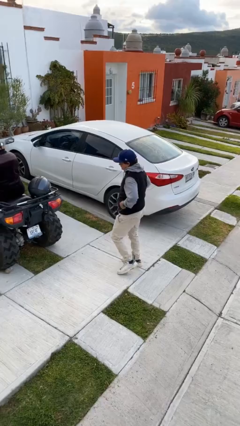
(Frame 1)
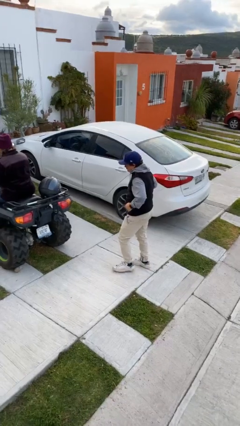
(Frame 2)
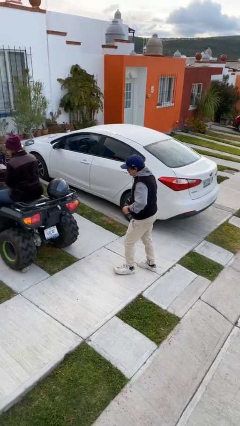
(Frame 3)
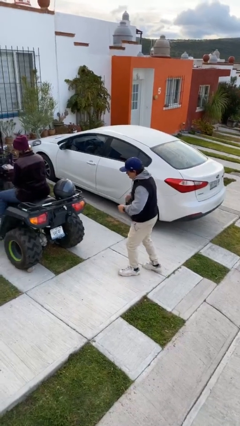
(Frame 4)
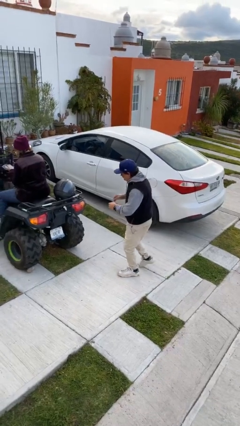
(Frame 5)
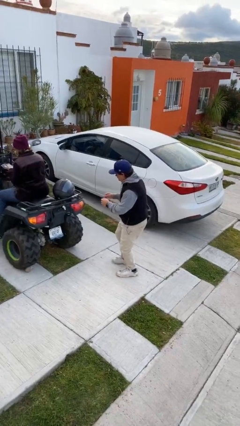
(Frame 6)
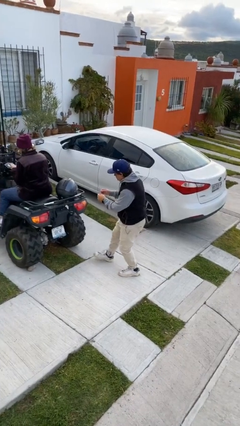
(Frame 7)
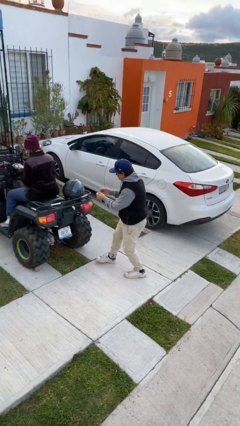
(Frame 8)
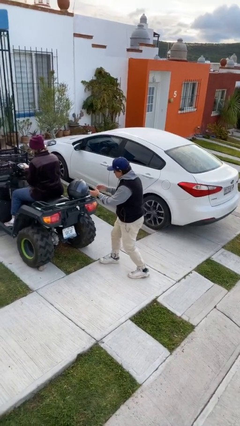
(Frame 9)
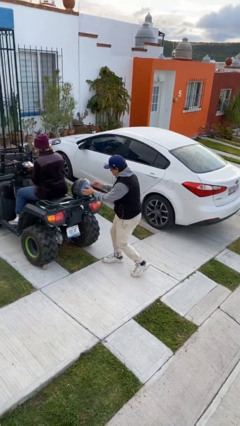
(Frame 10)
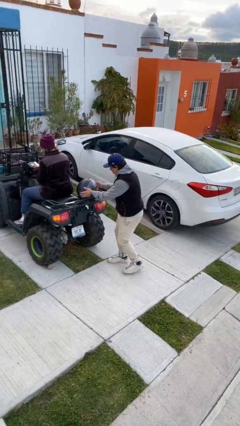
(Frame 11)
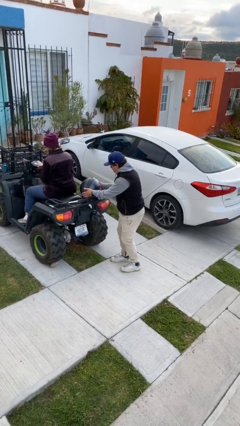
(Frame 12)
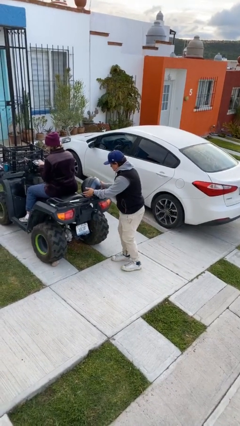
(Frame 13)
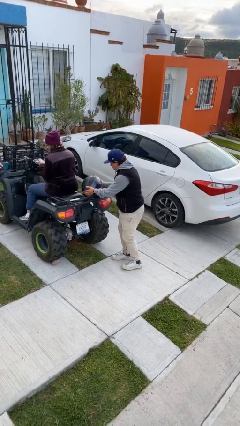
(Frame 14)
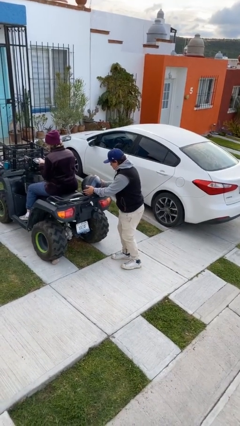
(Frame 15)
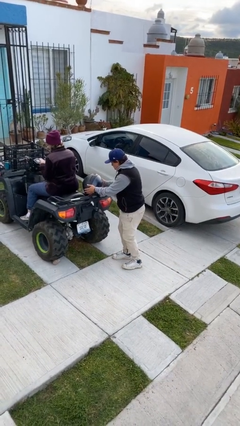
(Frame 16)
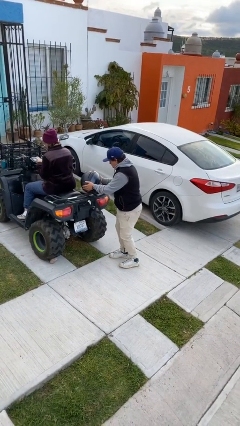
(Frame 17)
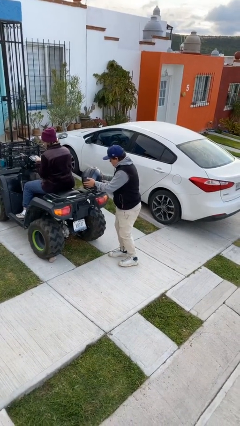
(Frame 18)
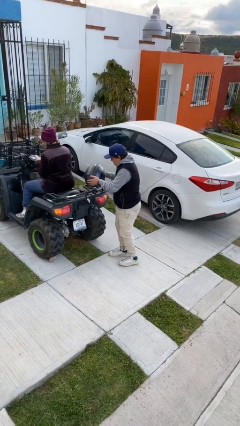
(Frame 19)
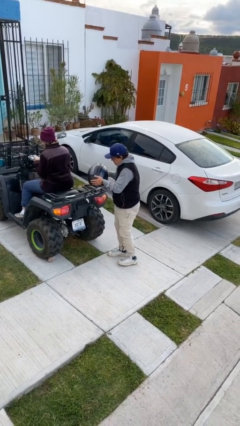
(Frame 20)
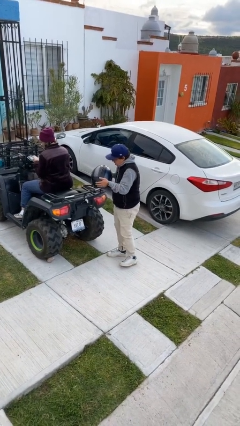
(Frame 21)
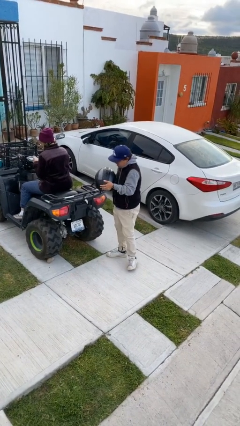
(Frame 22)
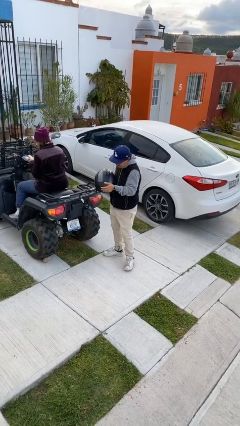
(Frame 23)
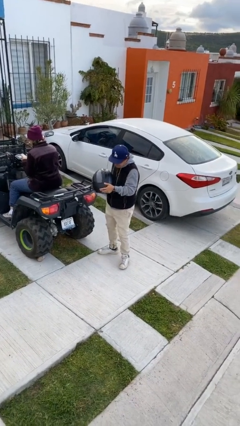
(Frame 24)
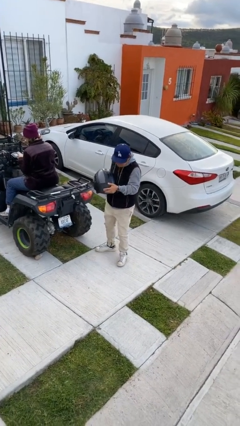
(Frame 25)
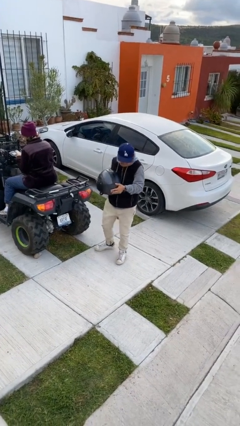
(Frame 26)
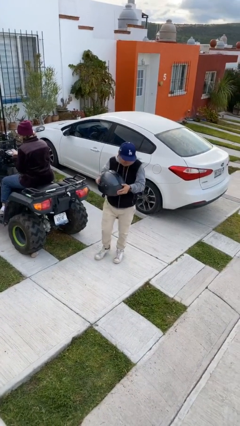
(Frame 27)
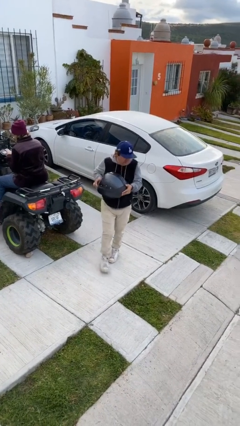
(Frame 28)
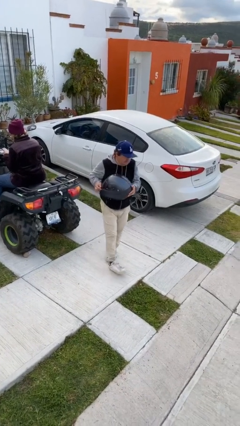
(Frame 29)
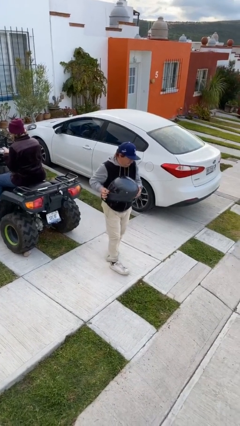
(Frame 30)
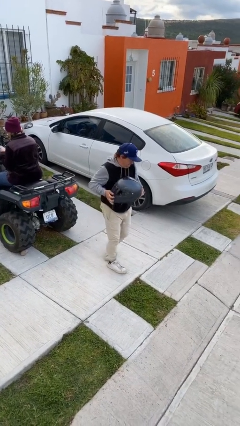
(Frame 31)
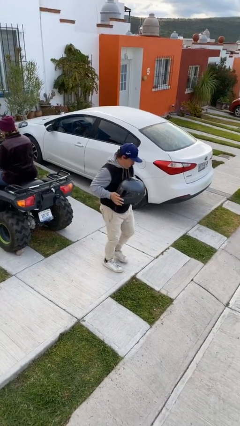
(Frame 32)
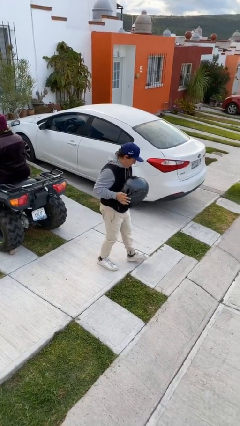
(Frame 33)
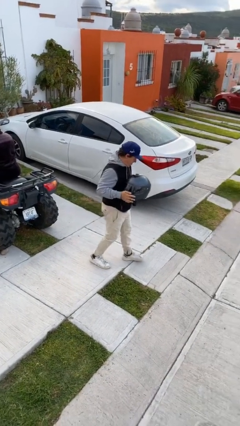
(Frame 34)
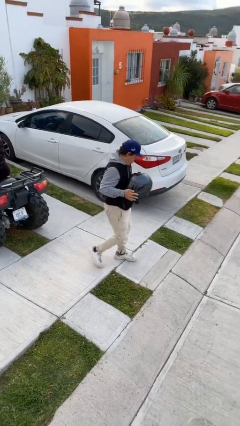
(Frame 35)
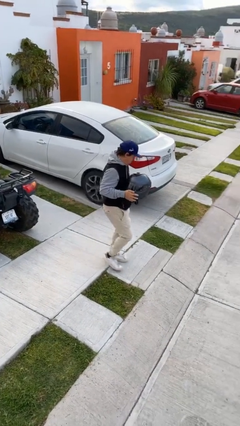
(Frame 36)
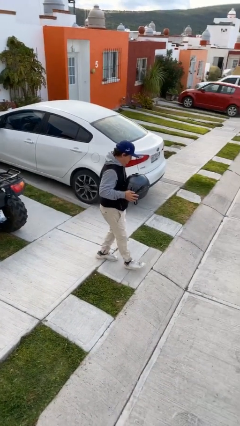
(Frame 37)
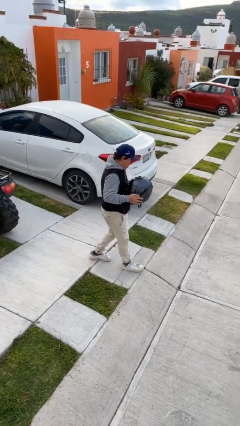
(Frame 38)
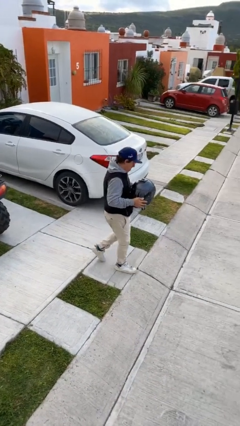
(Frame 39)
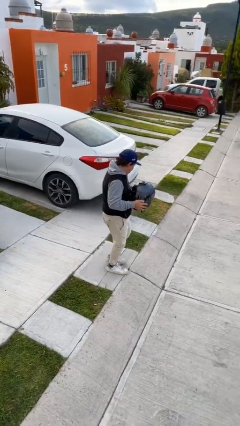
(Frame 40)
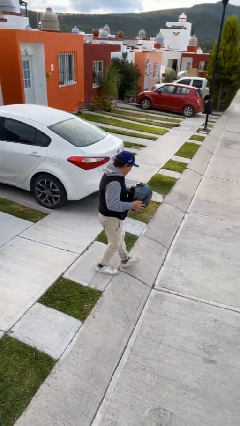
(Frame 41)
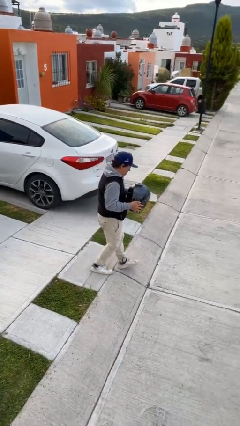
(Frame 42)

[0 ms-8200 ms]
person steals object from person

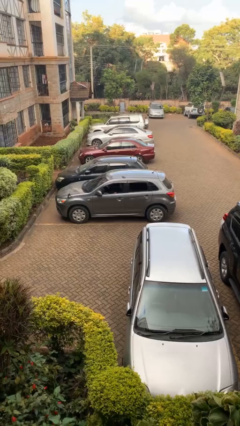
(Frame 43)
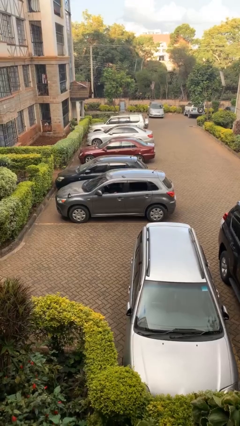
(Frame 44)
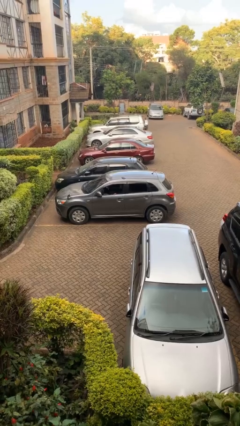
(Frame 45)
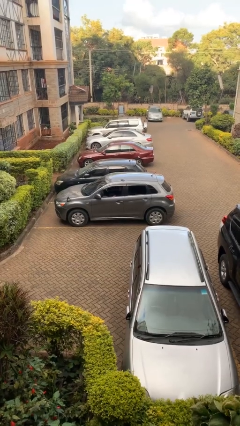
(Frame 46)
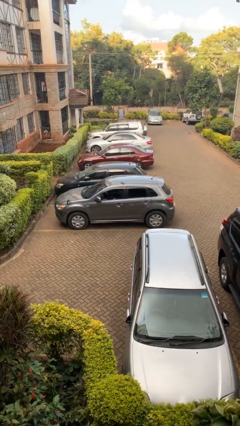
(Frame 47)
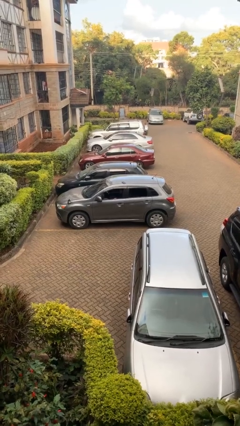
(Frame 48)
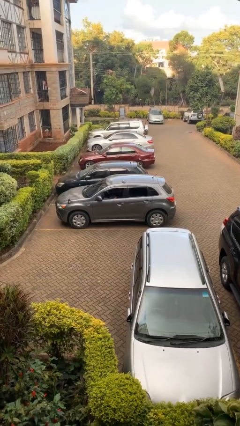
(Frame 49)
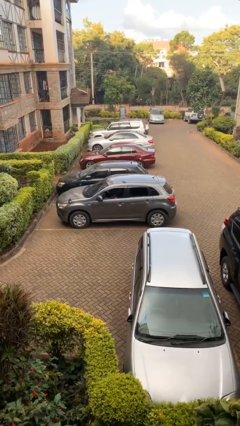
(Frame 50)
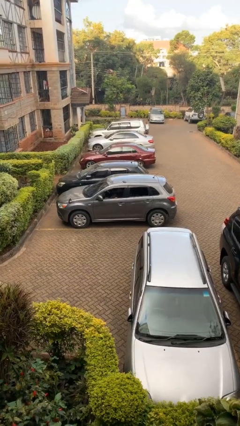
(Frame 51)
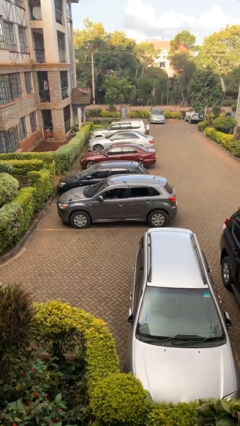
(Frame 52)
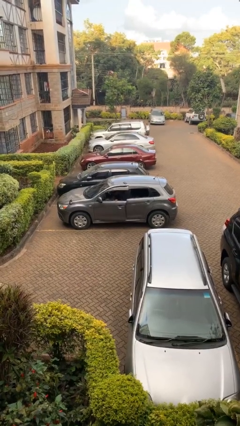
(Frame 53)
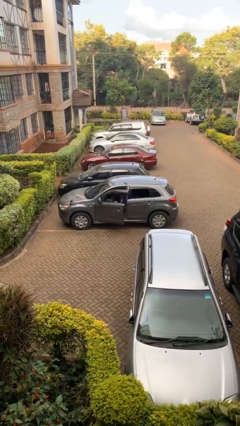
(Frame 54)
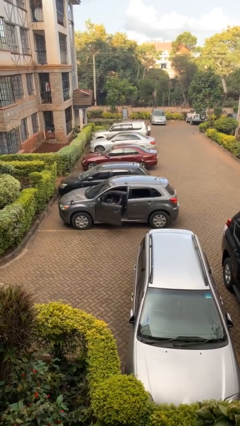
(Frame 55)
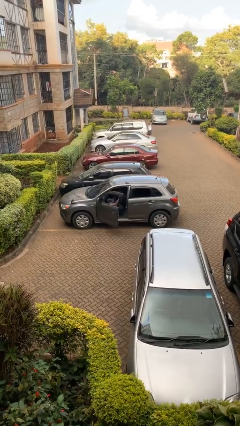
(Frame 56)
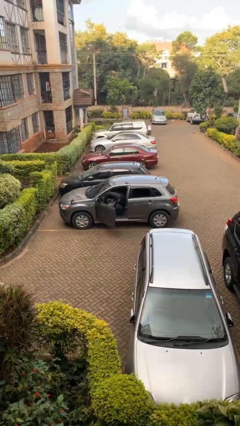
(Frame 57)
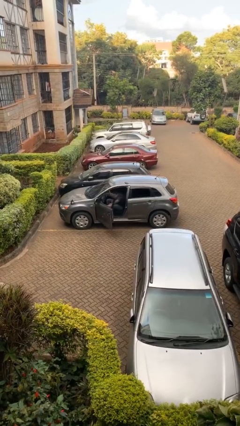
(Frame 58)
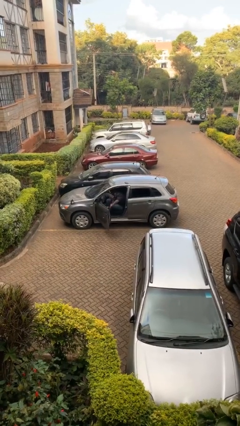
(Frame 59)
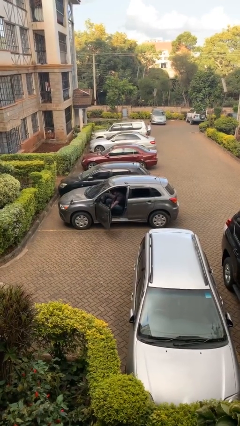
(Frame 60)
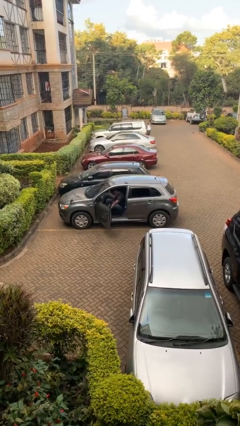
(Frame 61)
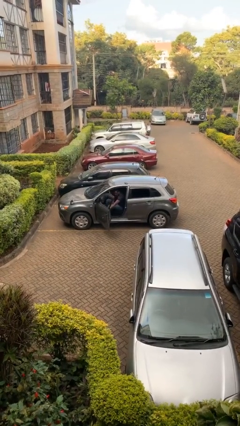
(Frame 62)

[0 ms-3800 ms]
person opens car door

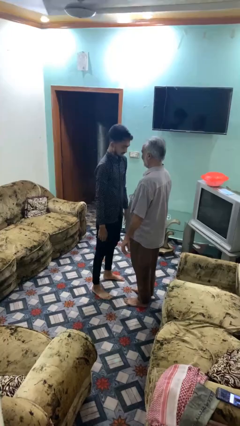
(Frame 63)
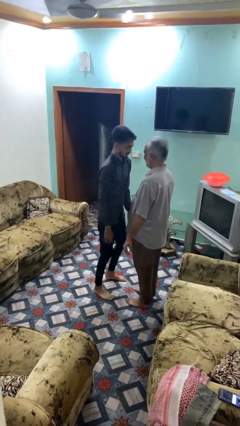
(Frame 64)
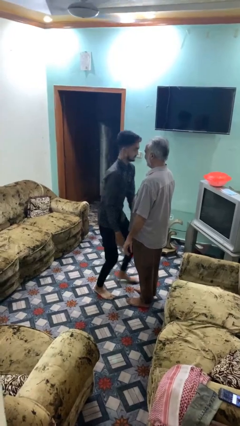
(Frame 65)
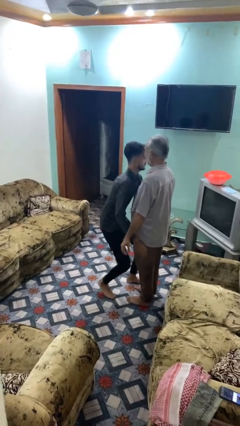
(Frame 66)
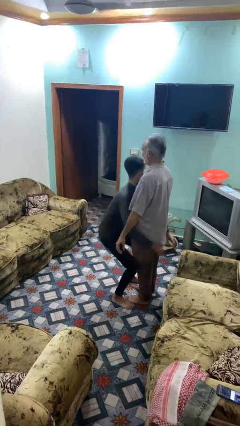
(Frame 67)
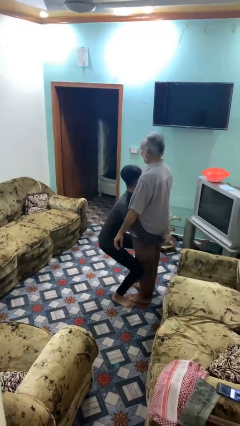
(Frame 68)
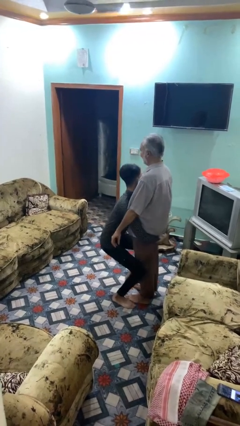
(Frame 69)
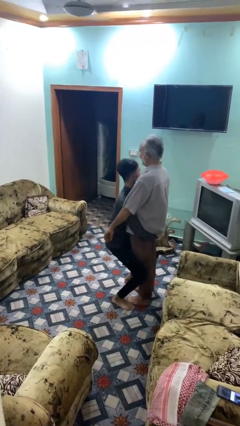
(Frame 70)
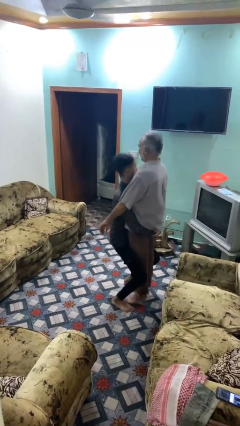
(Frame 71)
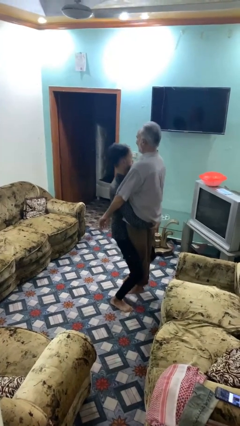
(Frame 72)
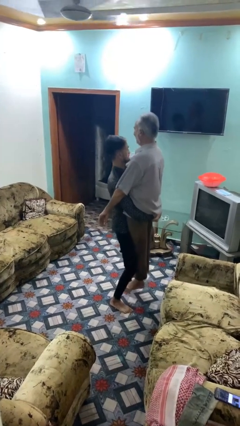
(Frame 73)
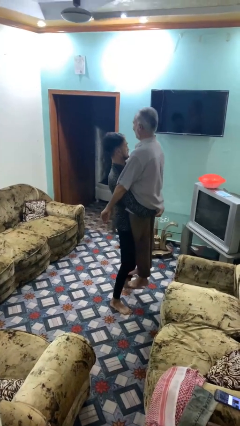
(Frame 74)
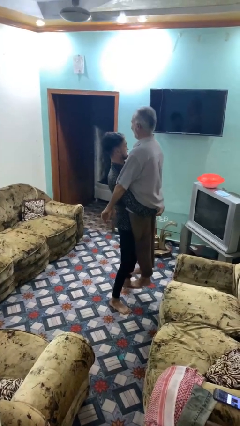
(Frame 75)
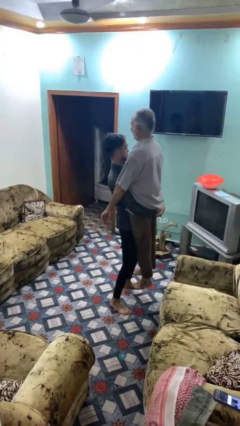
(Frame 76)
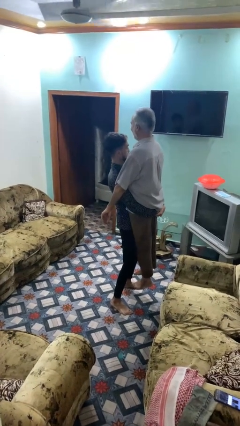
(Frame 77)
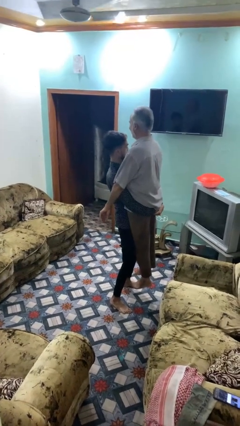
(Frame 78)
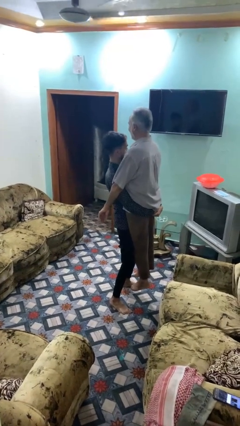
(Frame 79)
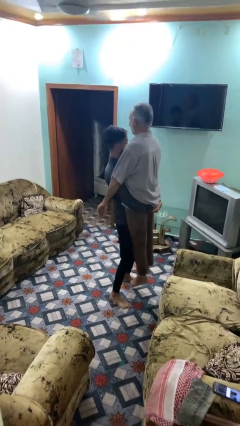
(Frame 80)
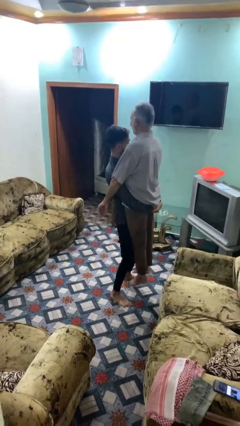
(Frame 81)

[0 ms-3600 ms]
person picks up person

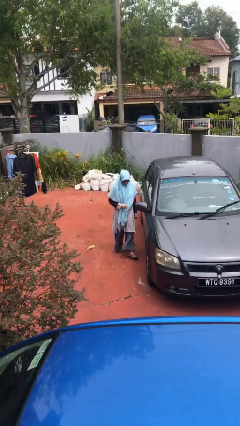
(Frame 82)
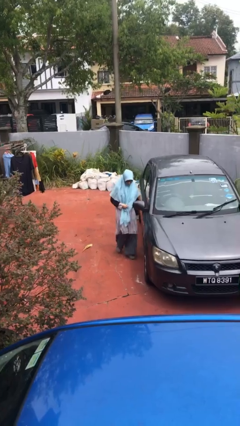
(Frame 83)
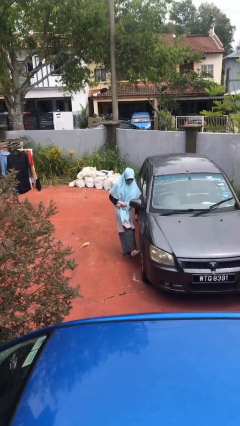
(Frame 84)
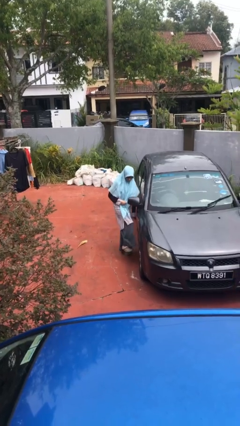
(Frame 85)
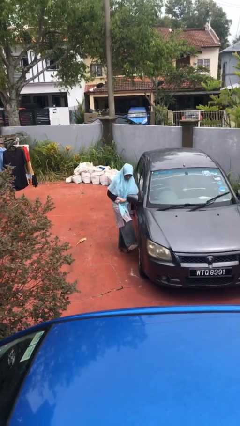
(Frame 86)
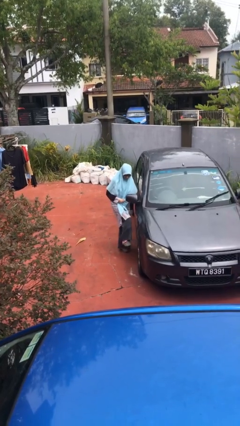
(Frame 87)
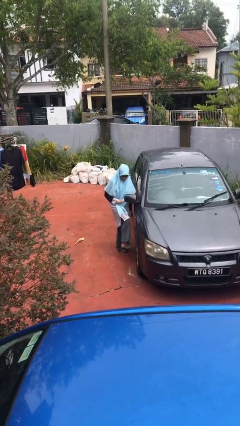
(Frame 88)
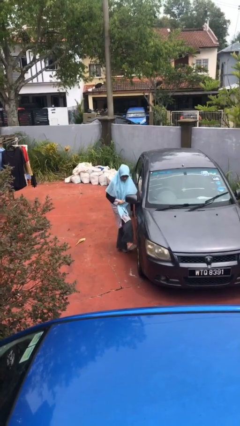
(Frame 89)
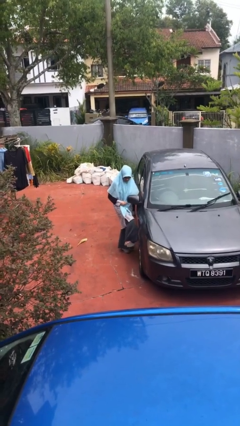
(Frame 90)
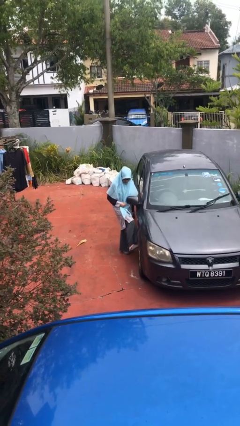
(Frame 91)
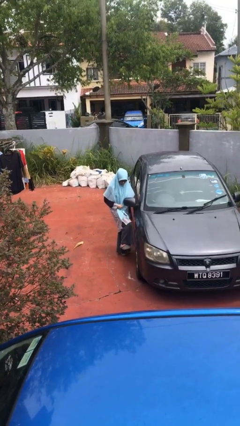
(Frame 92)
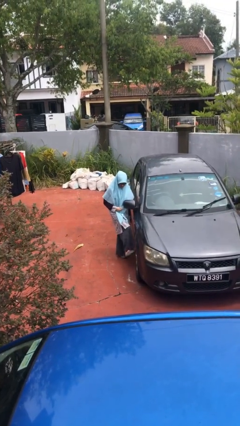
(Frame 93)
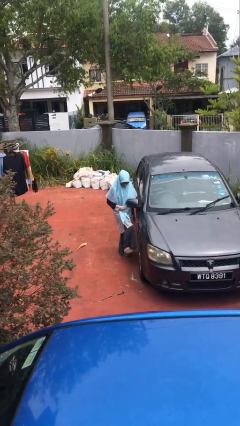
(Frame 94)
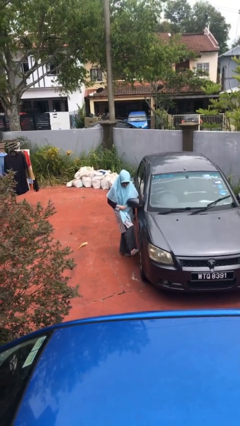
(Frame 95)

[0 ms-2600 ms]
person kicks car tires
